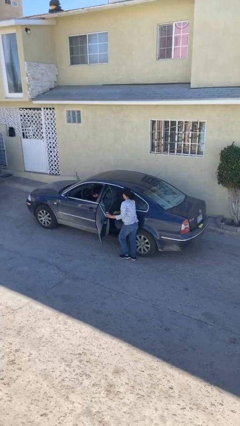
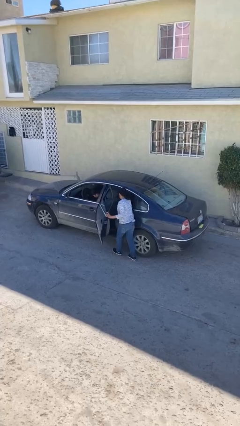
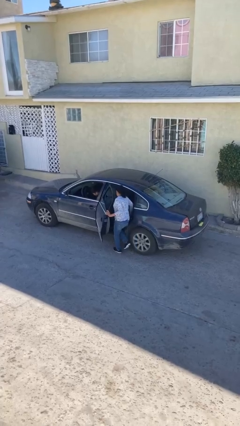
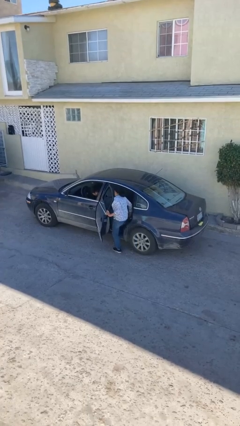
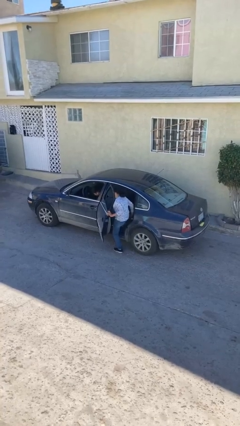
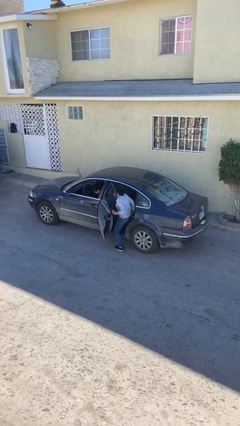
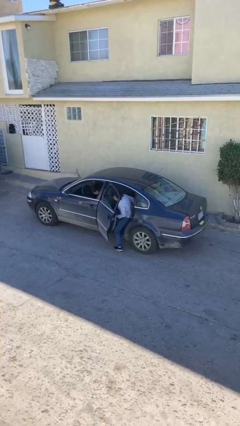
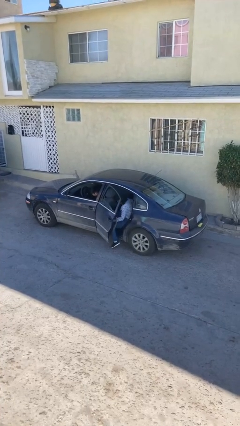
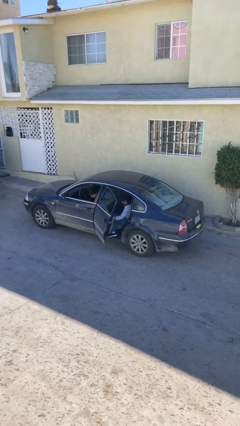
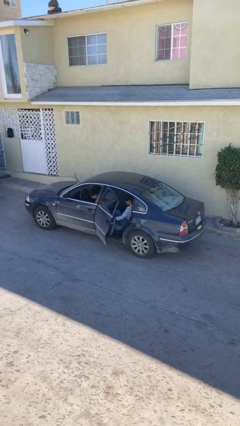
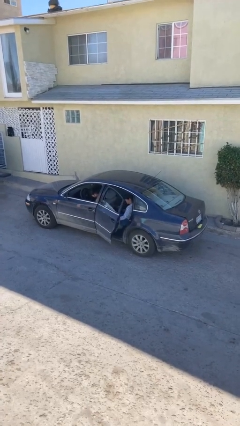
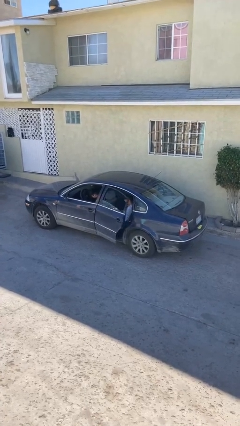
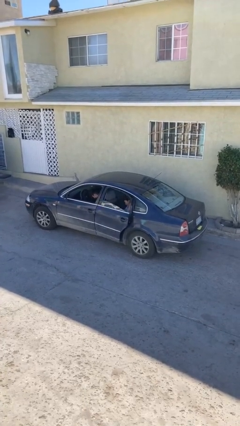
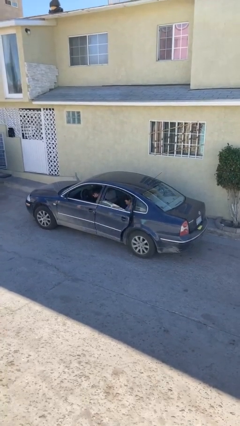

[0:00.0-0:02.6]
car picks up person

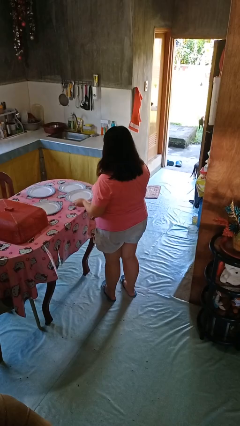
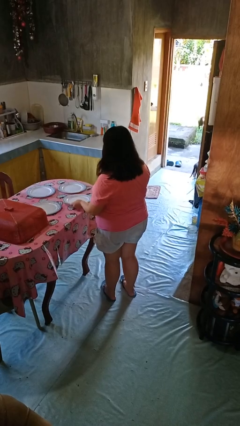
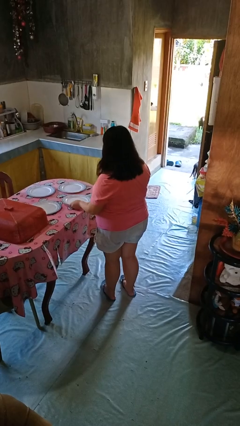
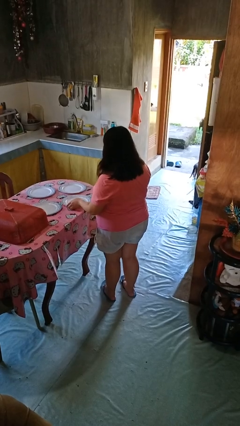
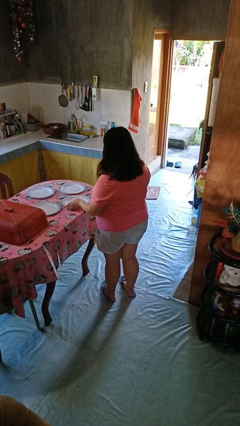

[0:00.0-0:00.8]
person sets table

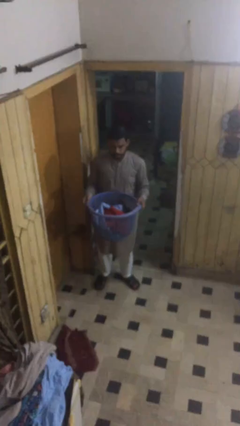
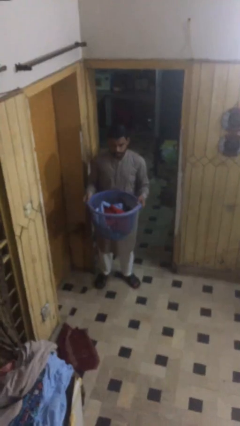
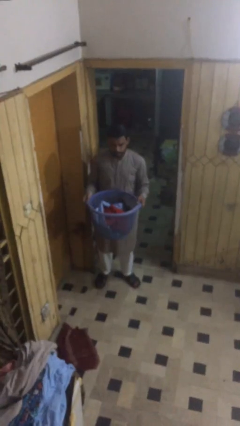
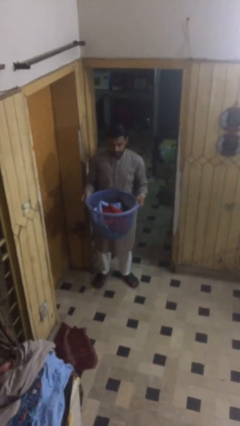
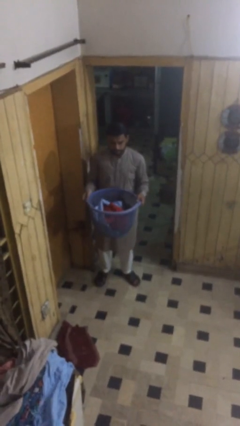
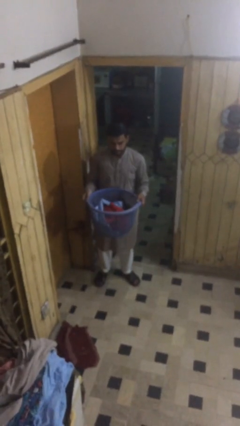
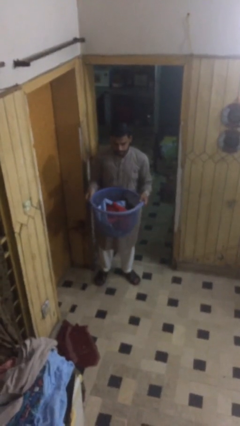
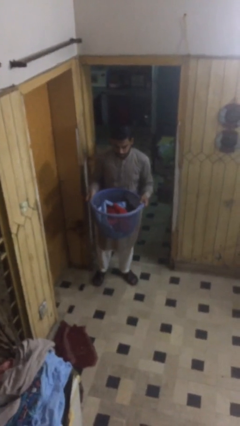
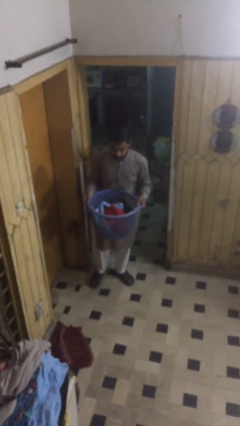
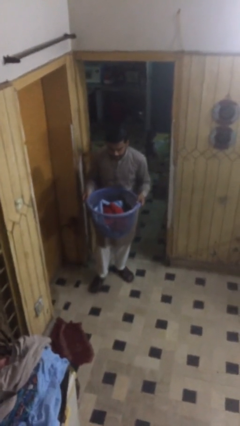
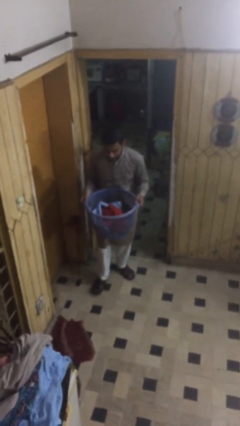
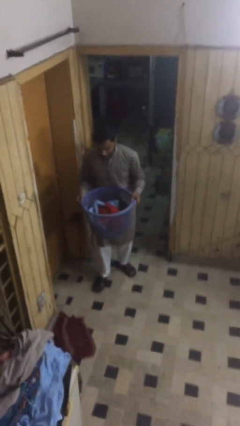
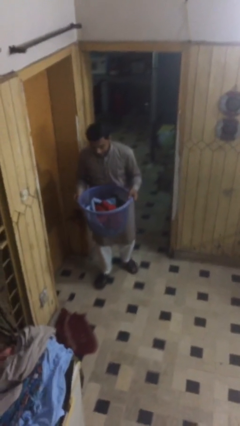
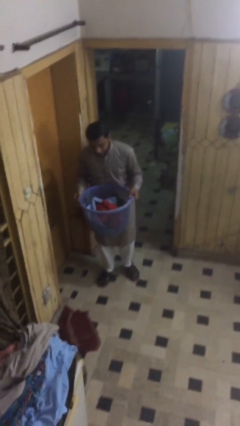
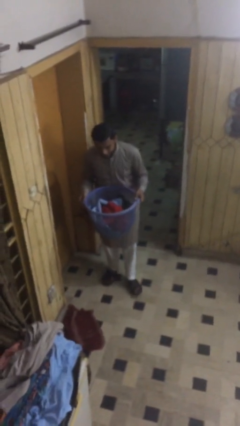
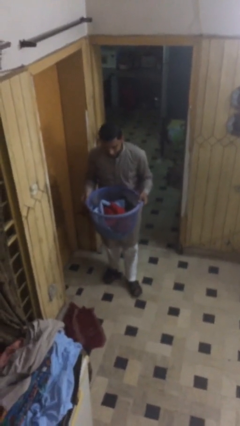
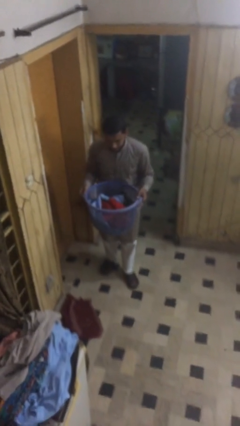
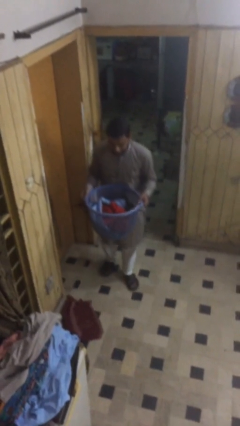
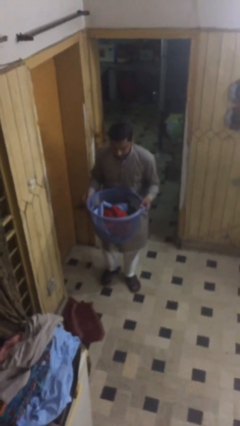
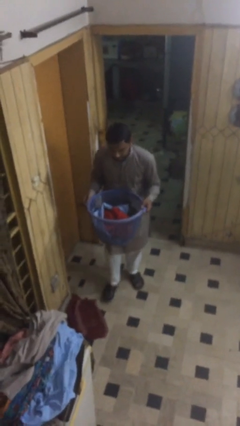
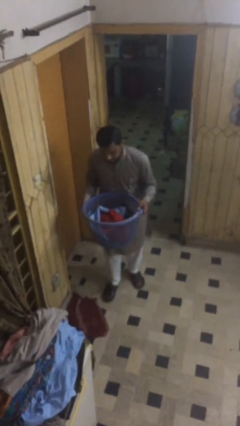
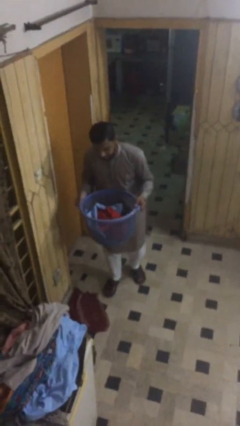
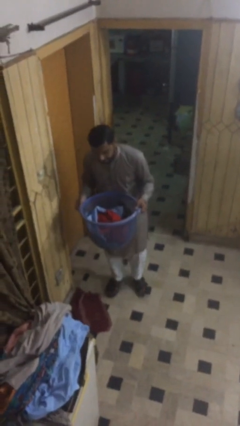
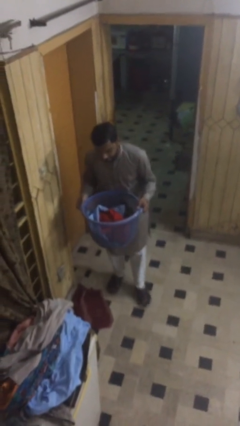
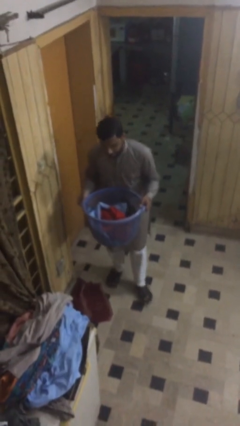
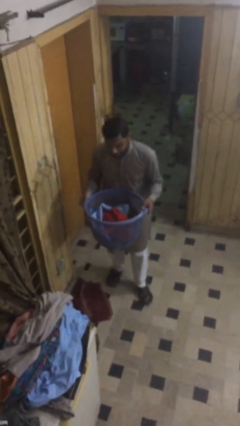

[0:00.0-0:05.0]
person carries heavy object

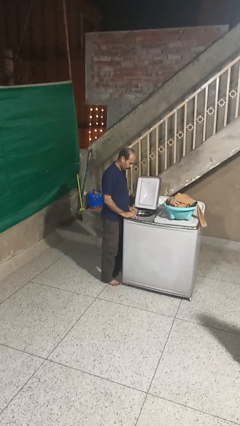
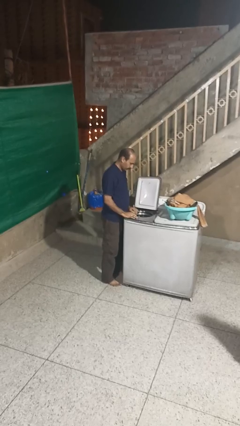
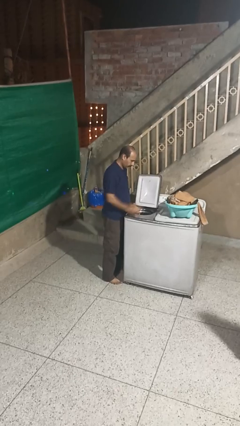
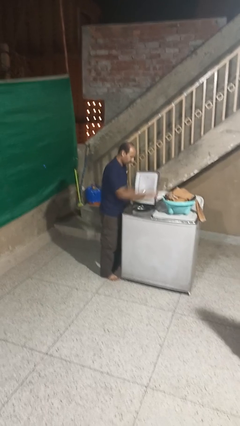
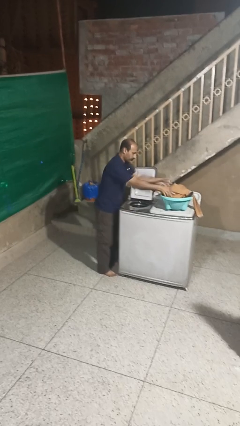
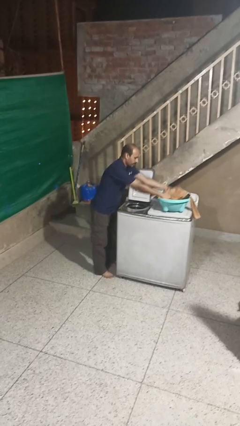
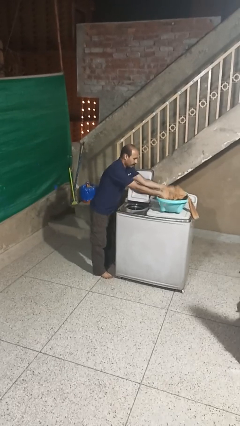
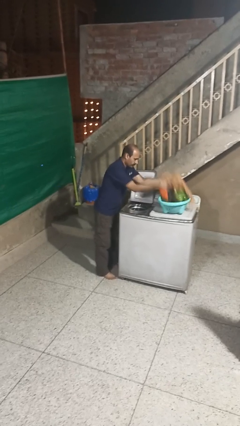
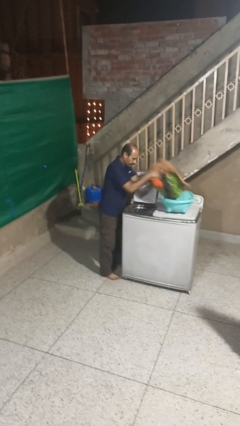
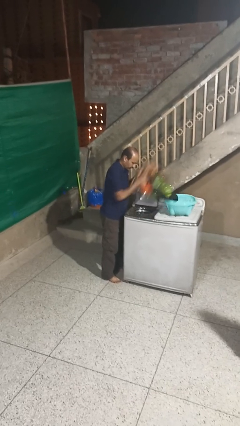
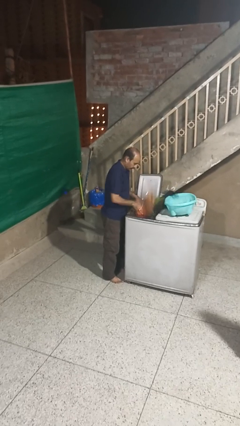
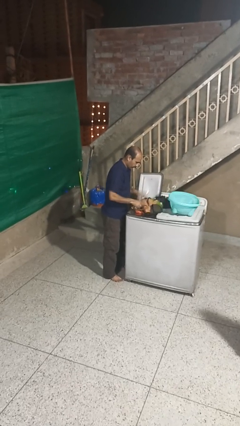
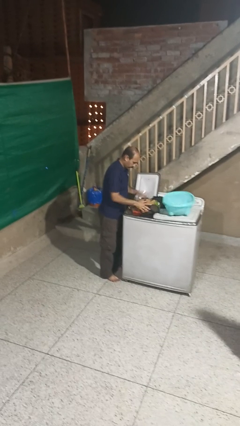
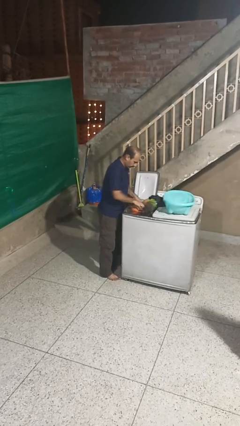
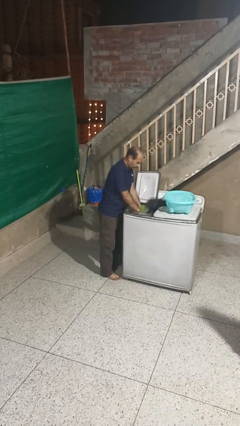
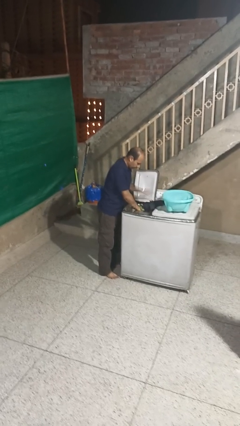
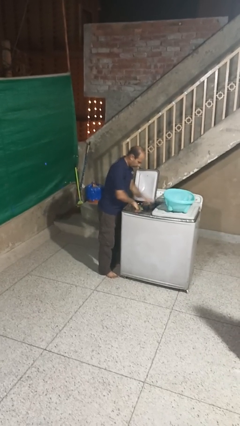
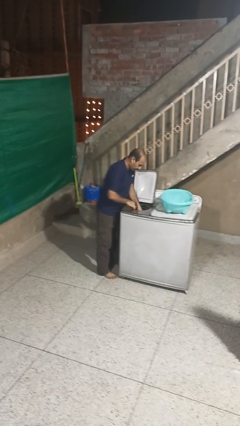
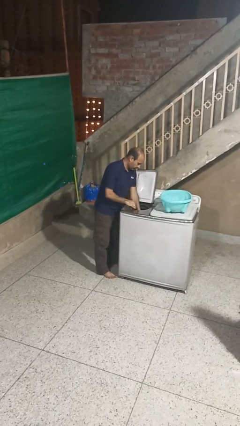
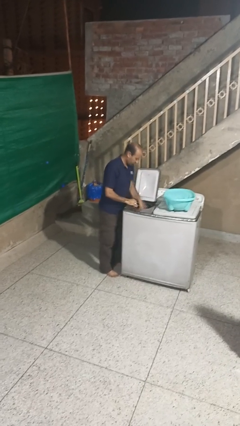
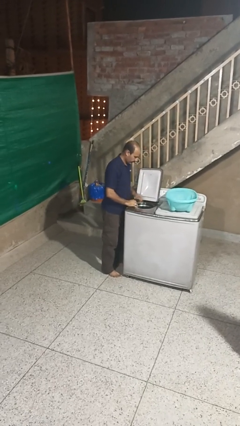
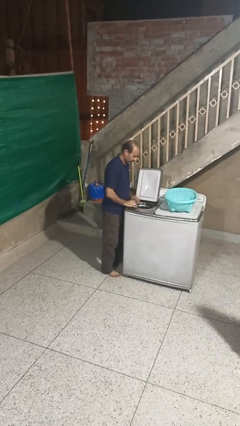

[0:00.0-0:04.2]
person loads dryer

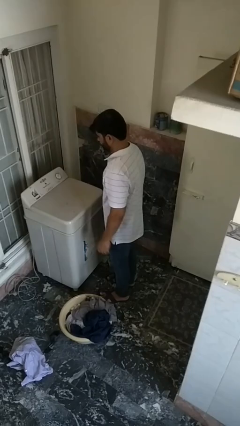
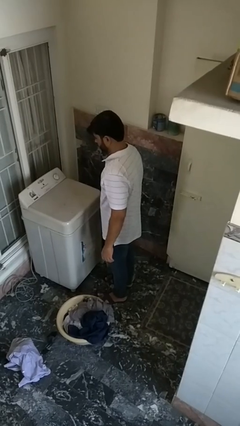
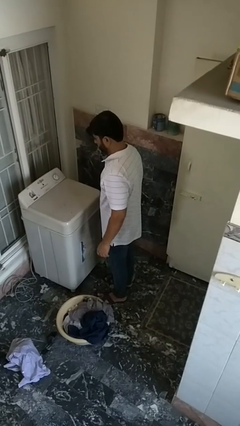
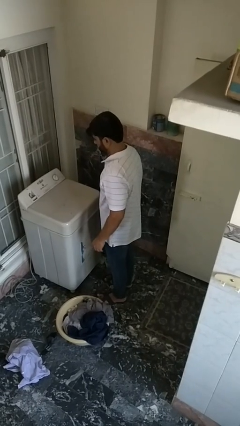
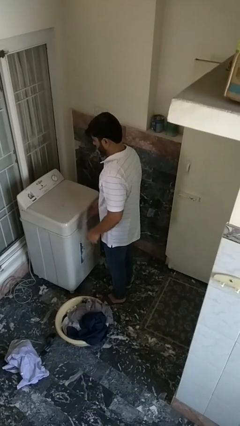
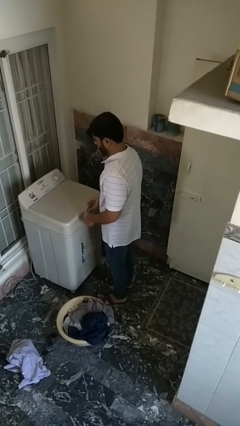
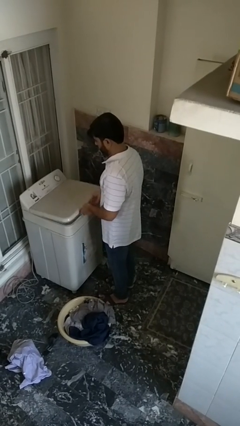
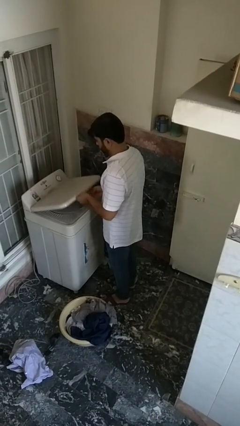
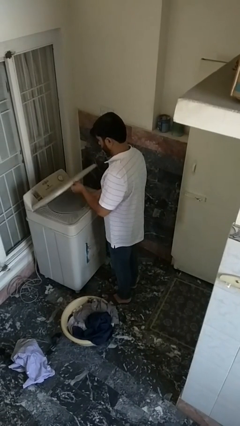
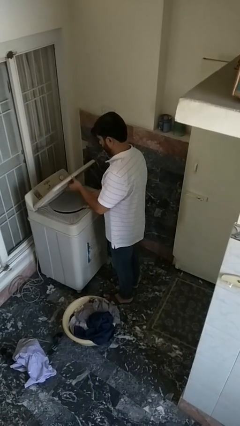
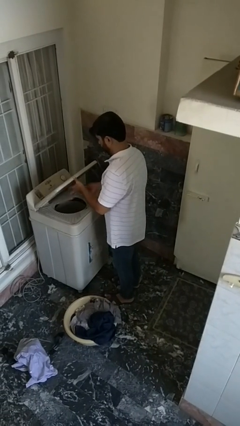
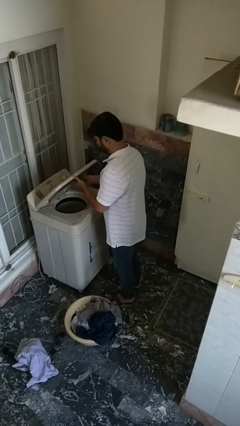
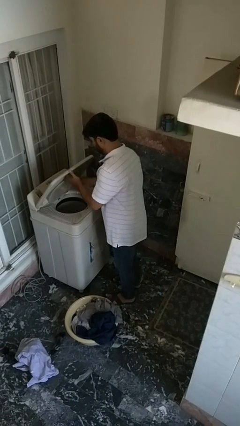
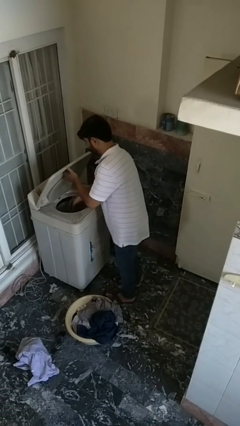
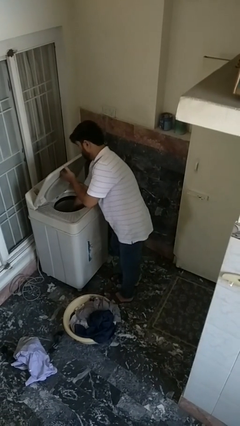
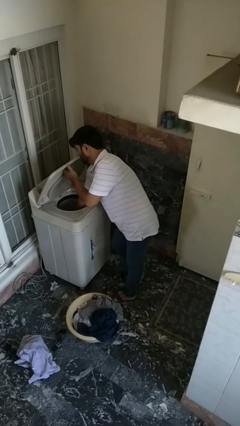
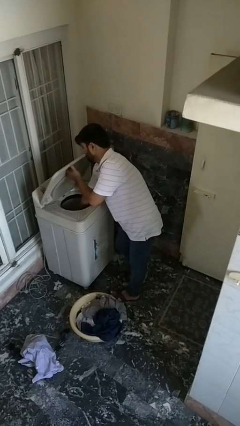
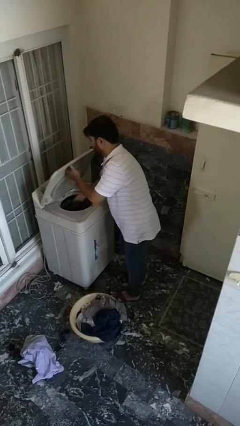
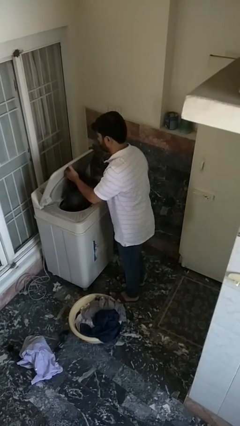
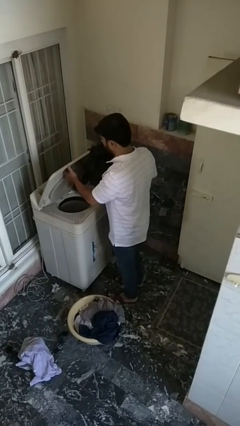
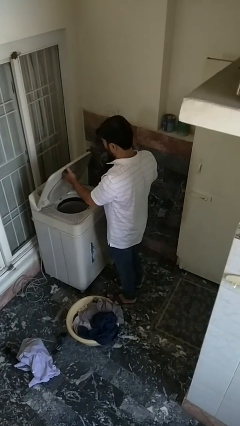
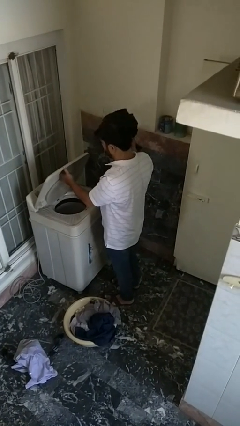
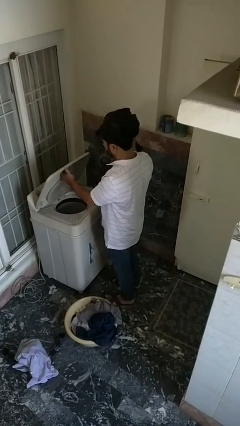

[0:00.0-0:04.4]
person unloads dryer

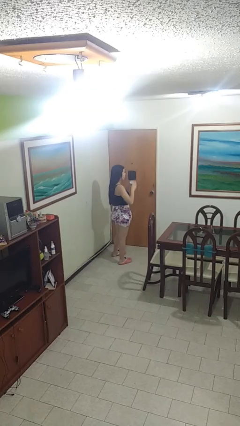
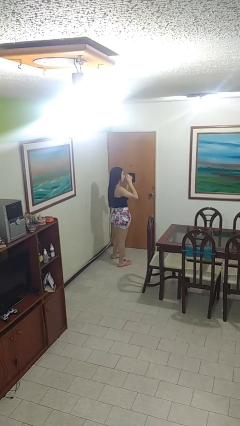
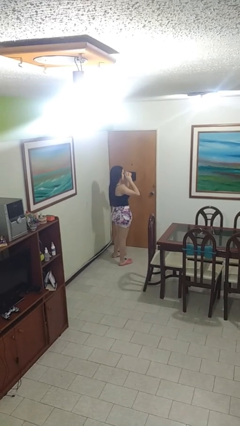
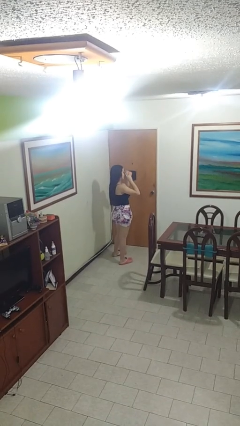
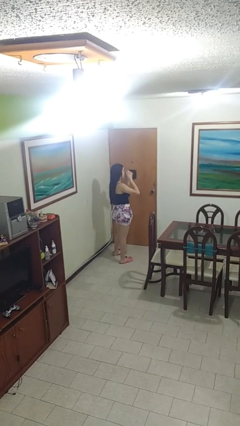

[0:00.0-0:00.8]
person drinks from mug
